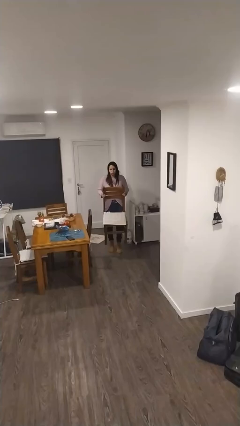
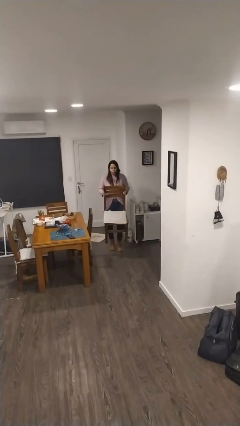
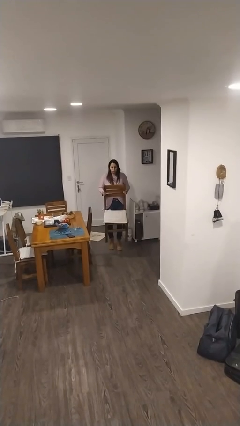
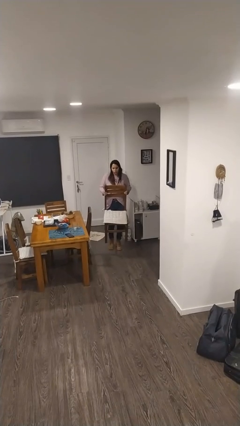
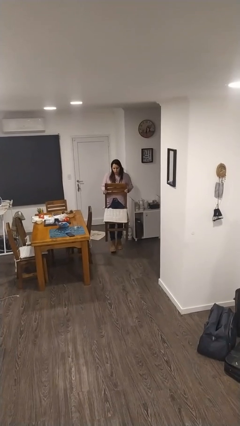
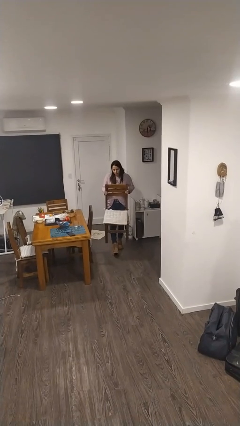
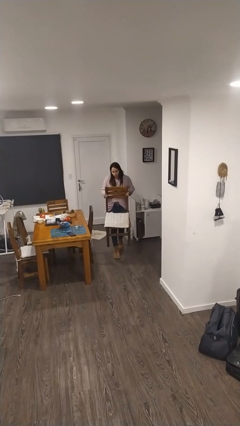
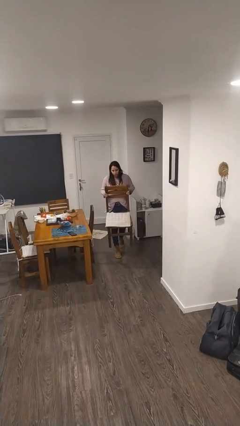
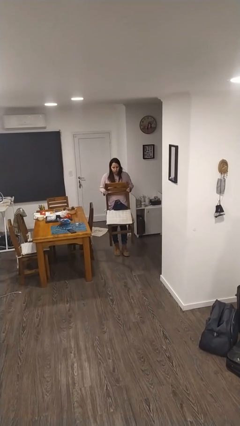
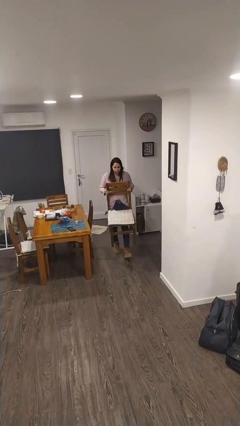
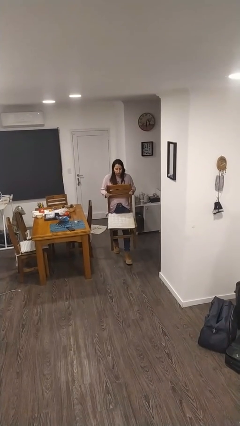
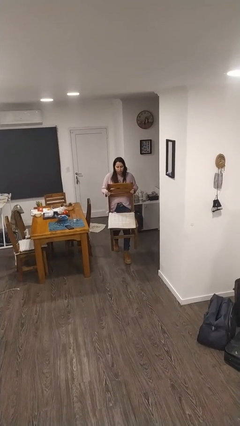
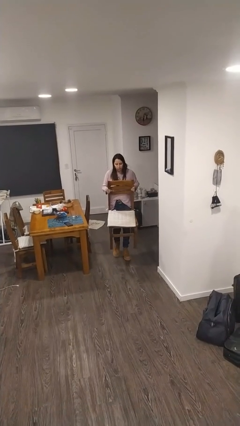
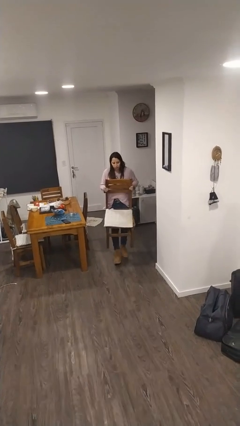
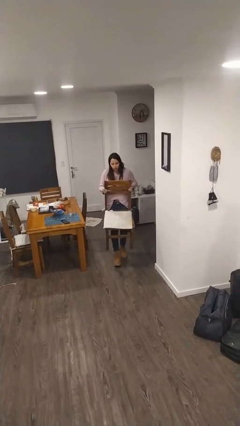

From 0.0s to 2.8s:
person carries furniture

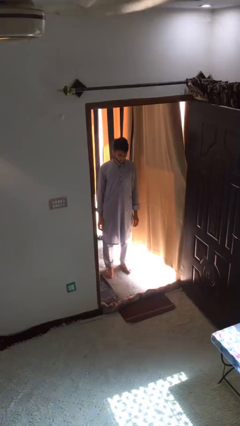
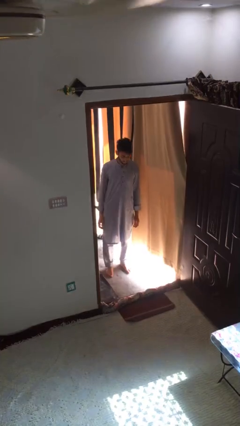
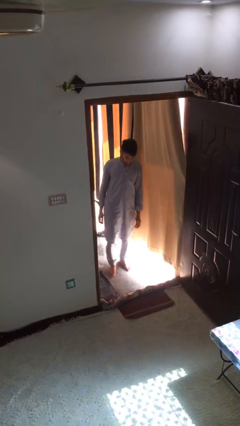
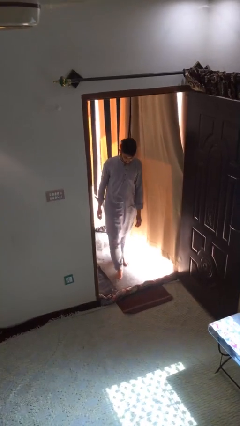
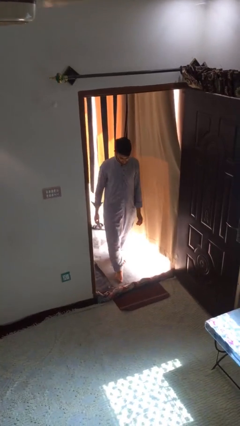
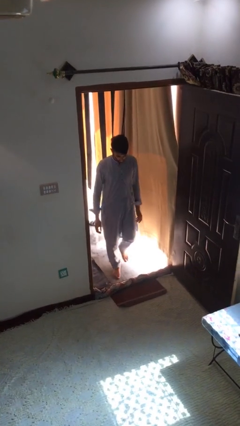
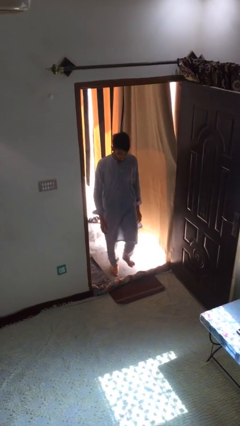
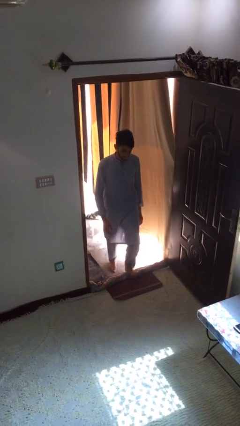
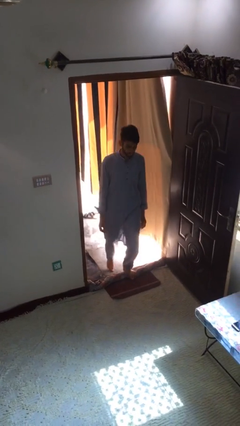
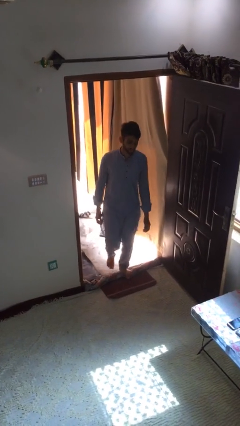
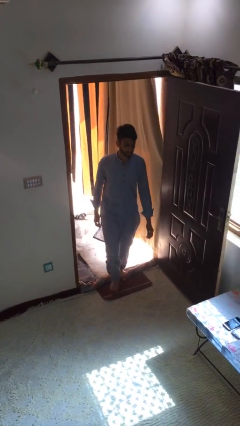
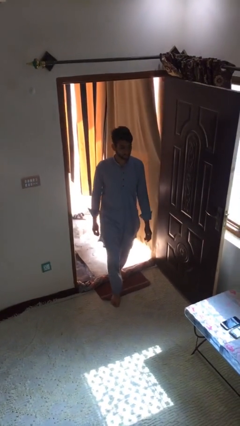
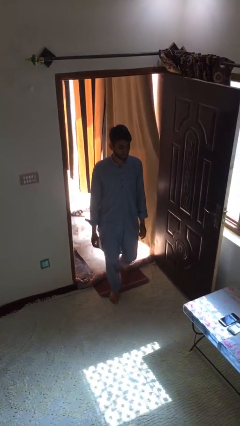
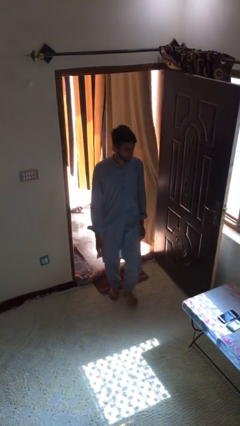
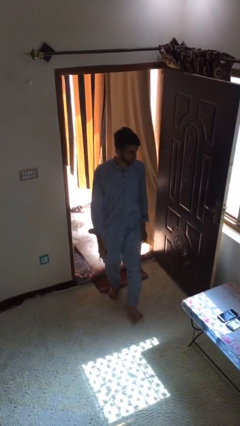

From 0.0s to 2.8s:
person enters scene through structure

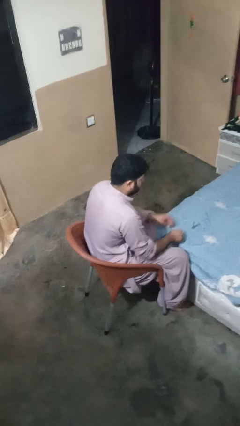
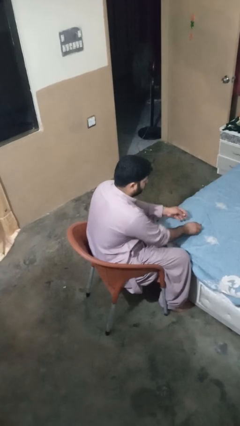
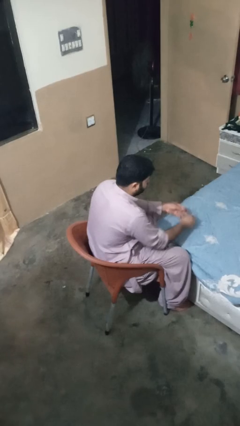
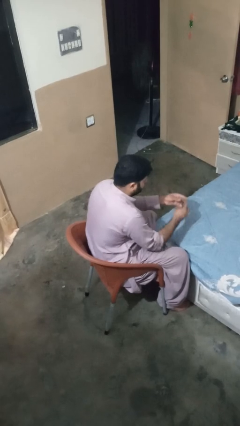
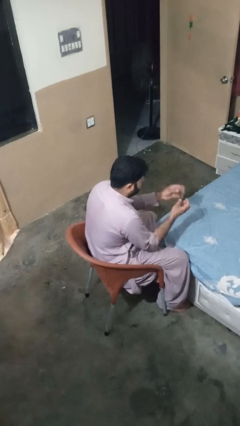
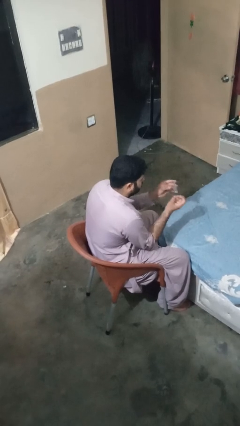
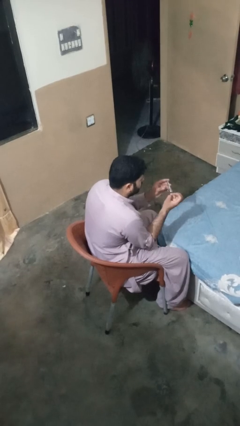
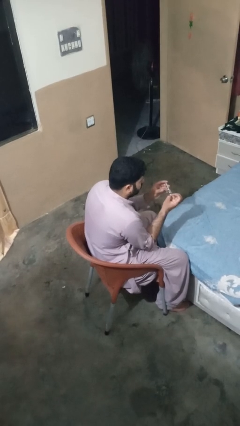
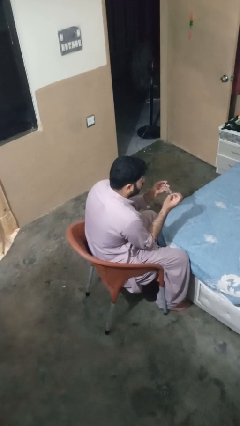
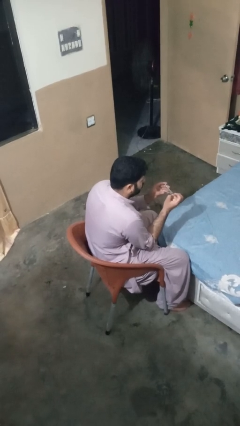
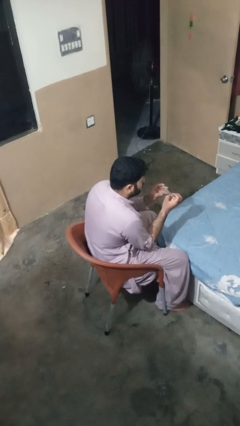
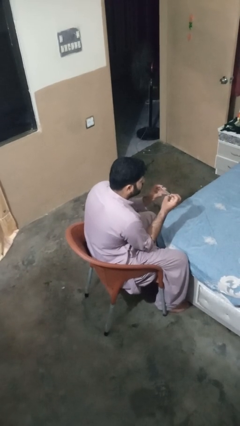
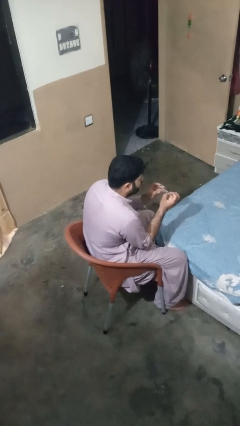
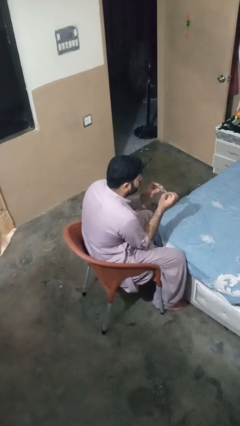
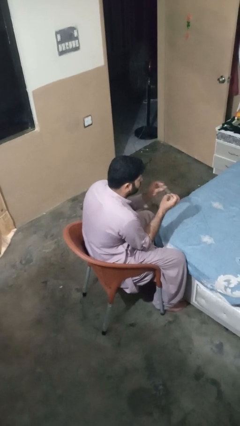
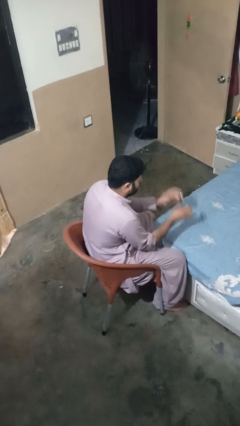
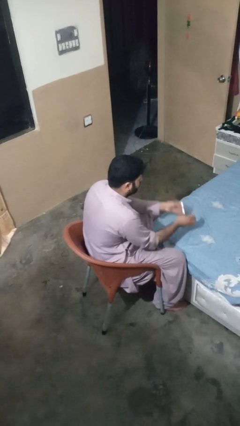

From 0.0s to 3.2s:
person clips fingernails

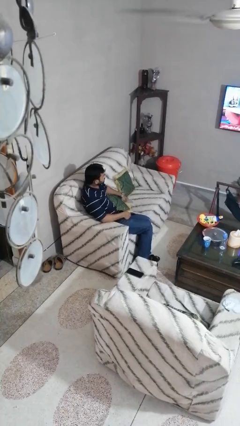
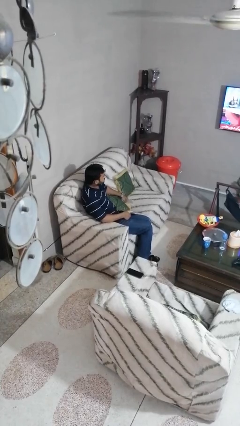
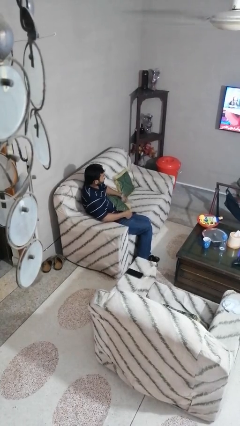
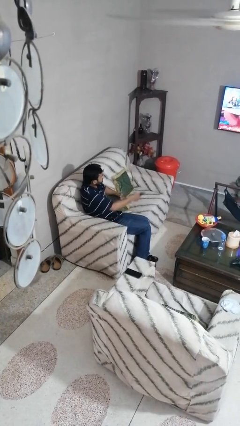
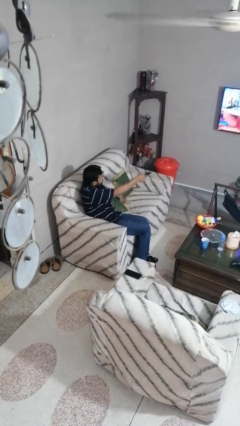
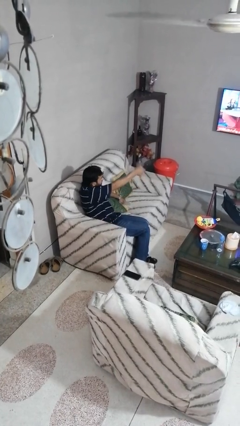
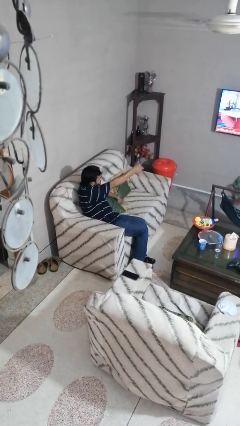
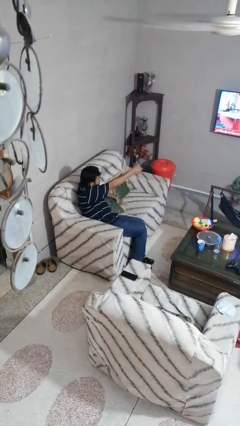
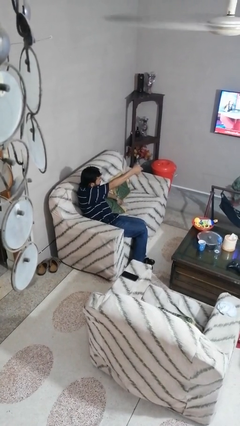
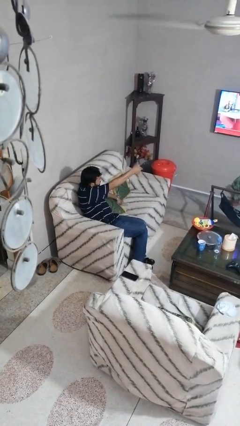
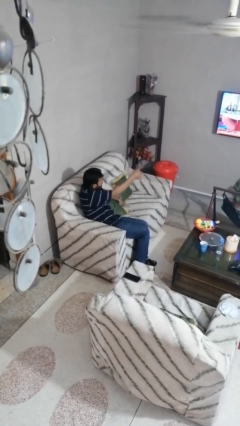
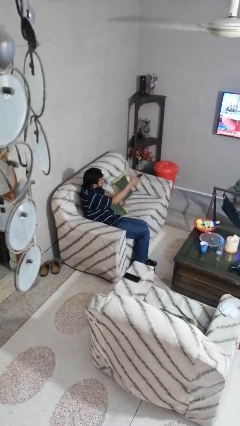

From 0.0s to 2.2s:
person uses television remote

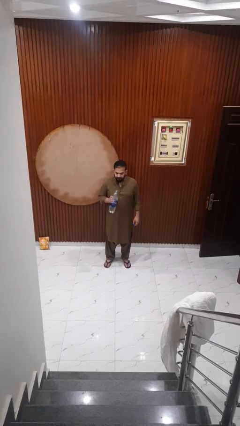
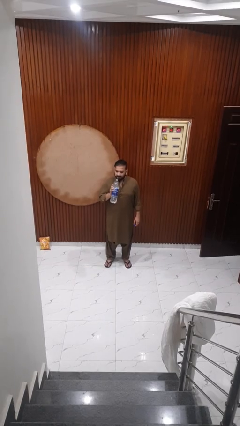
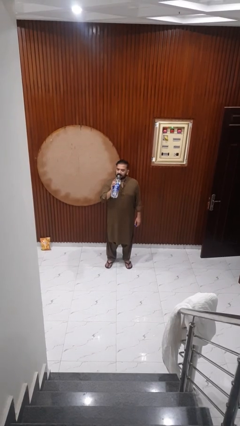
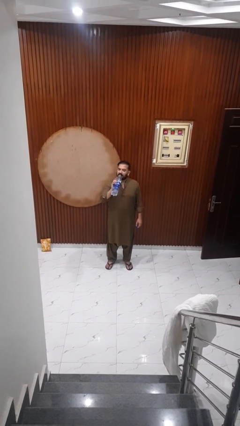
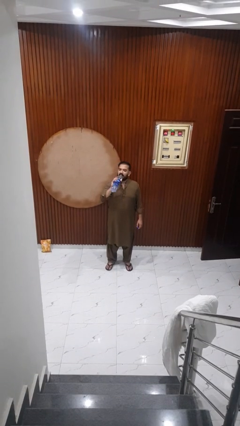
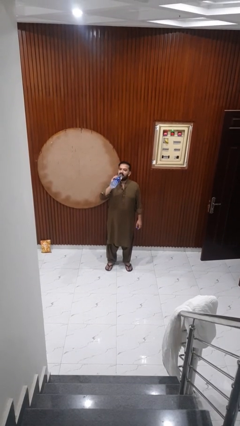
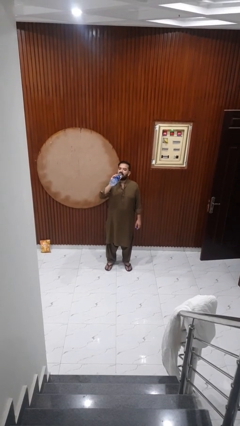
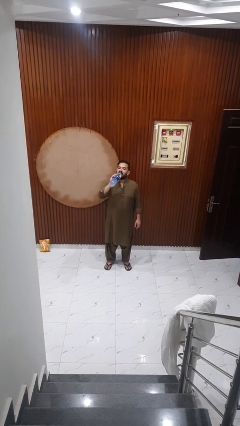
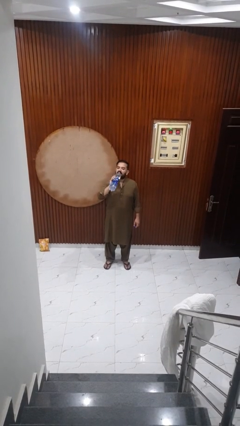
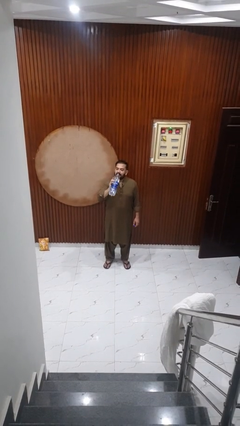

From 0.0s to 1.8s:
person drinks from bottle

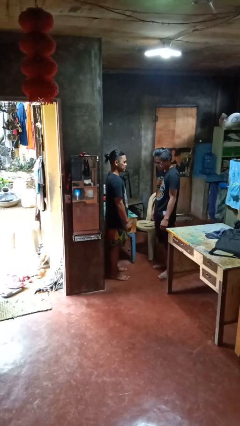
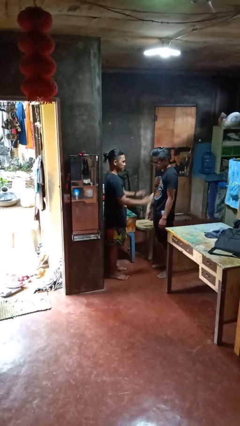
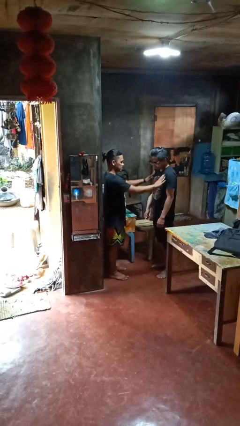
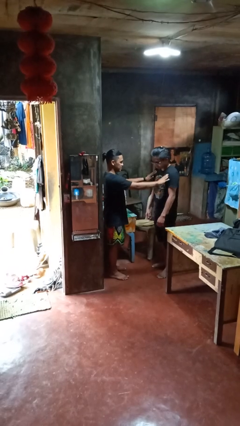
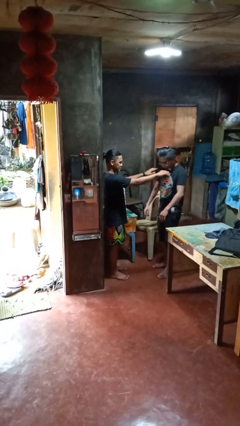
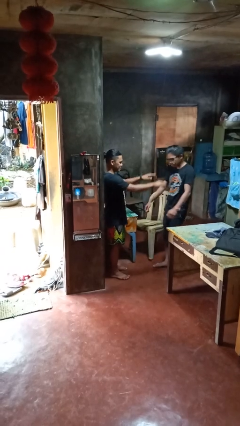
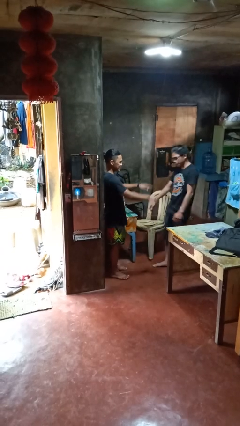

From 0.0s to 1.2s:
person shoves person

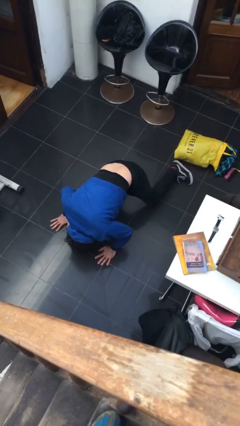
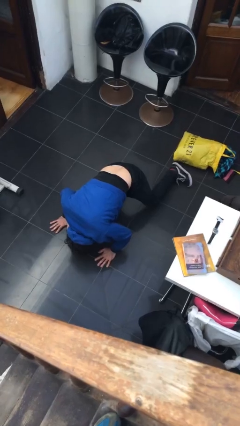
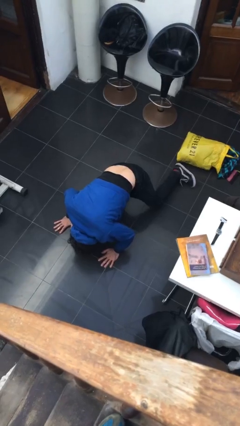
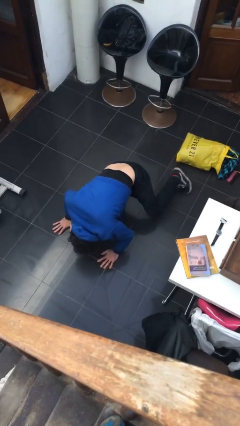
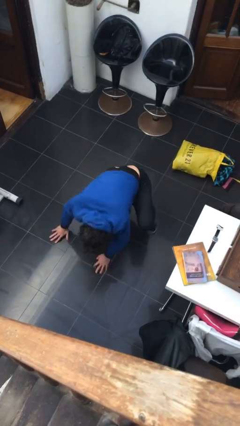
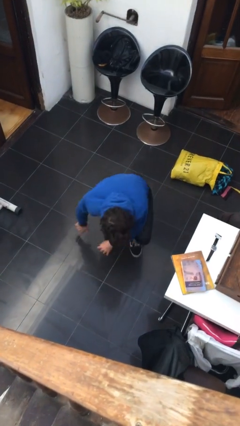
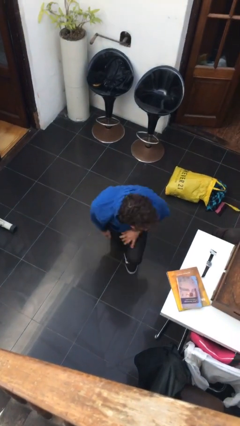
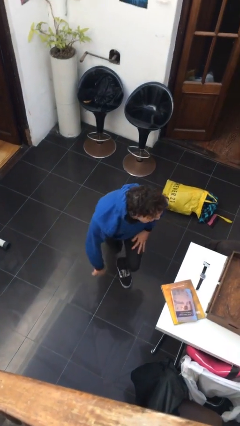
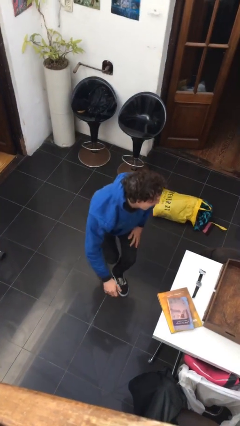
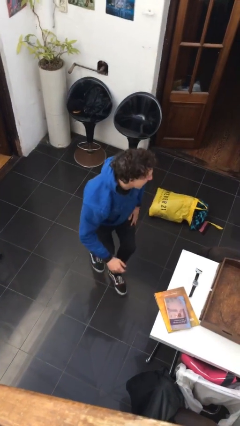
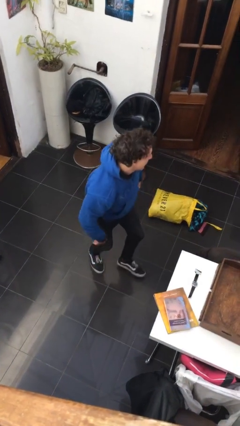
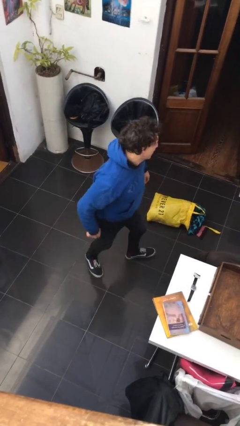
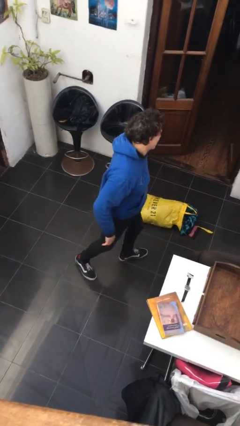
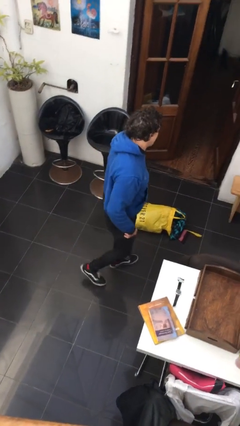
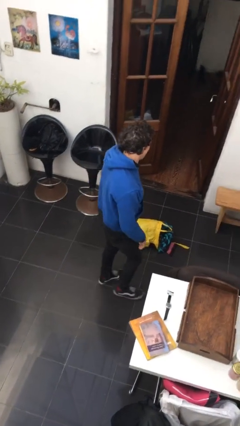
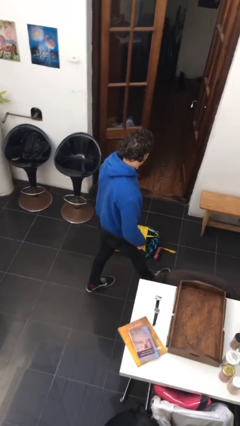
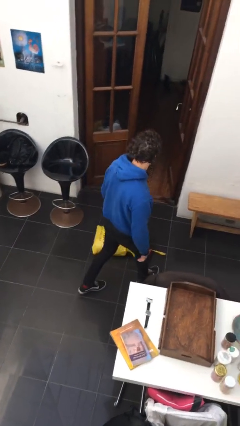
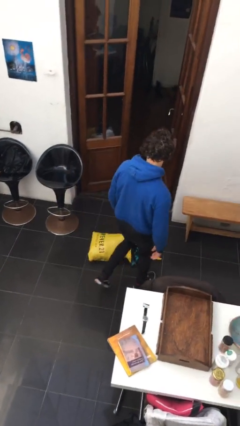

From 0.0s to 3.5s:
person stands up from floor
